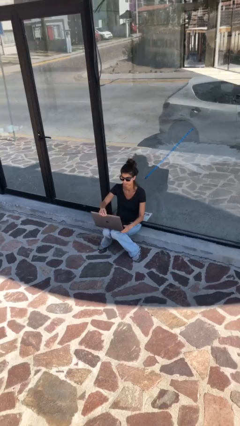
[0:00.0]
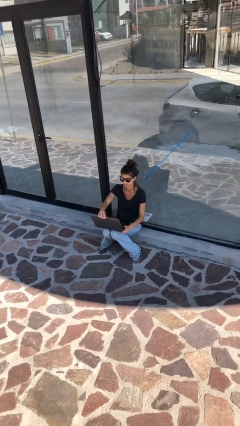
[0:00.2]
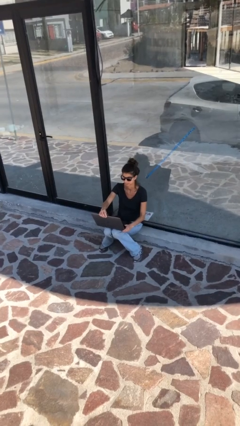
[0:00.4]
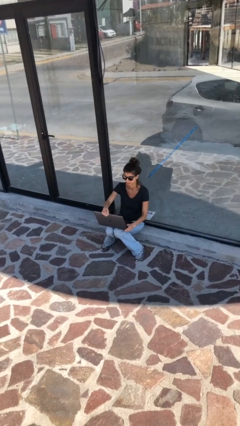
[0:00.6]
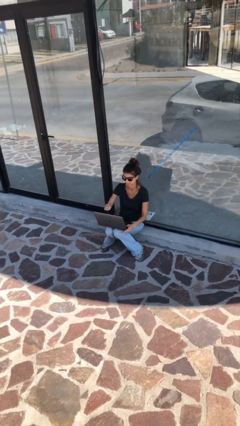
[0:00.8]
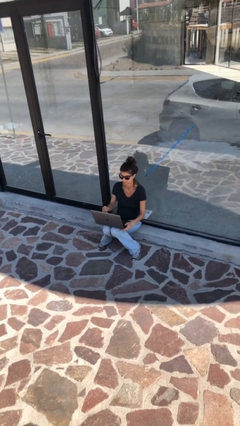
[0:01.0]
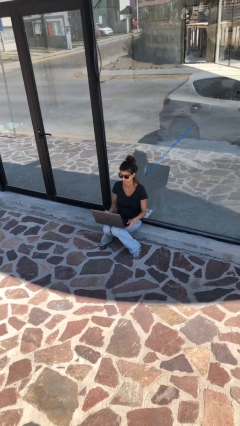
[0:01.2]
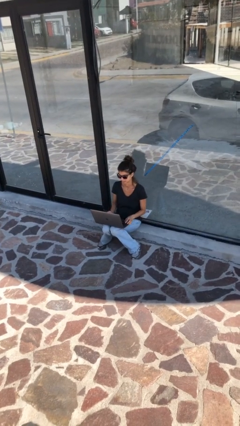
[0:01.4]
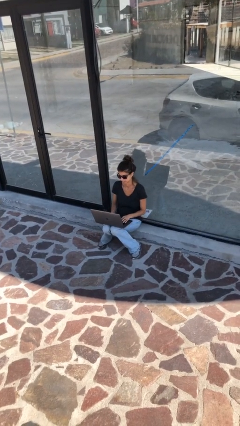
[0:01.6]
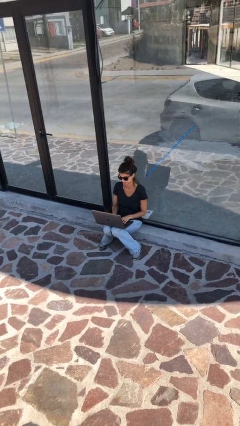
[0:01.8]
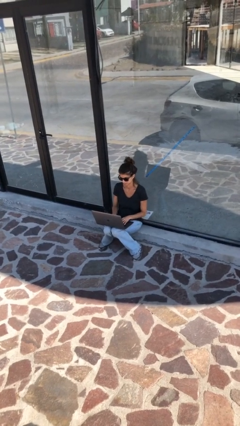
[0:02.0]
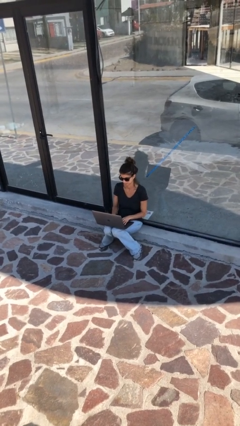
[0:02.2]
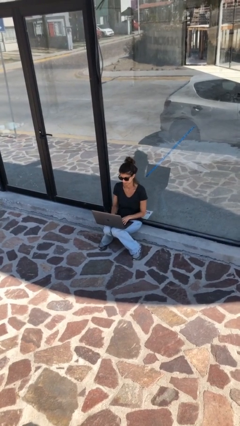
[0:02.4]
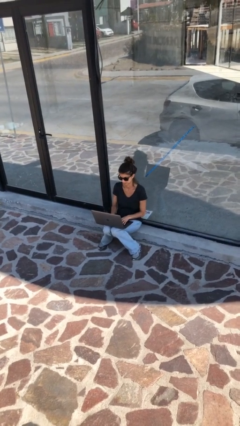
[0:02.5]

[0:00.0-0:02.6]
person interacts with laptop

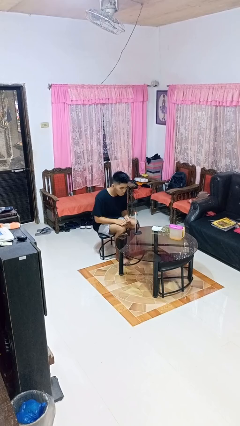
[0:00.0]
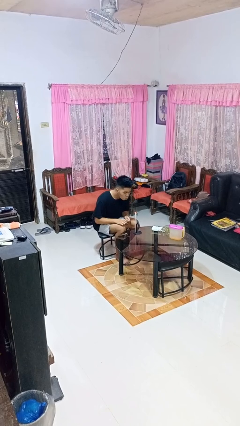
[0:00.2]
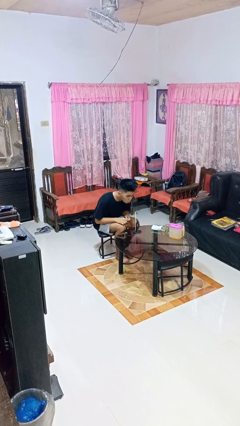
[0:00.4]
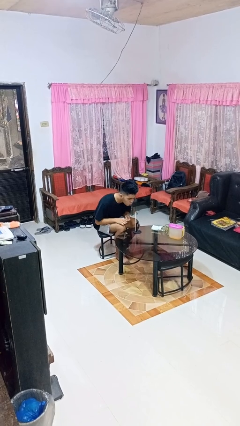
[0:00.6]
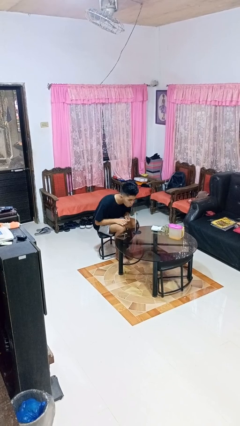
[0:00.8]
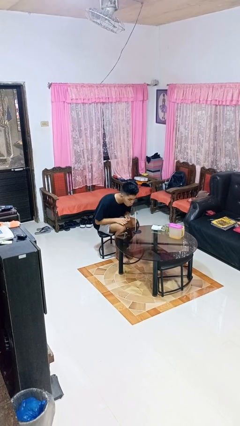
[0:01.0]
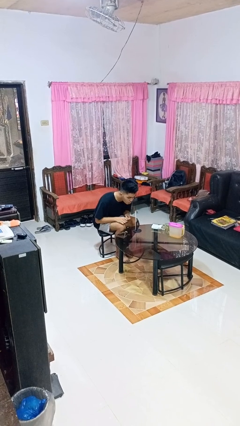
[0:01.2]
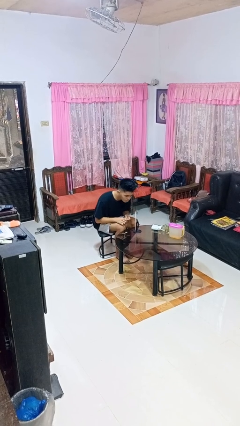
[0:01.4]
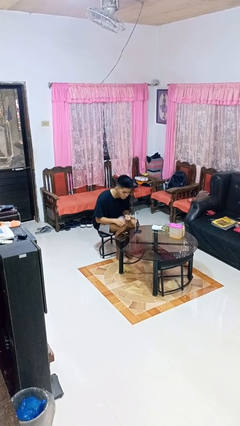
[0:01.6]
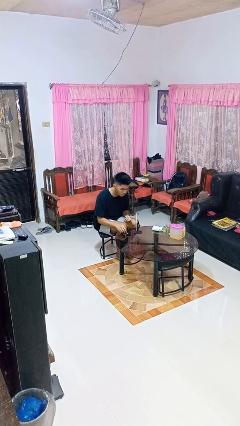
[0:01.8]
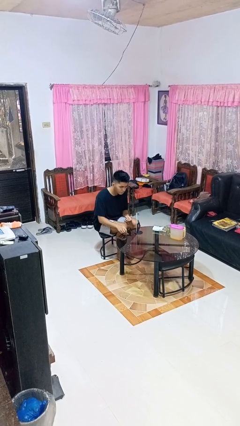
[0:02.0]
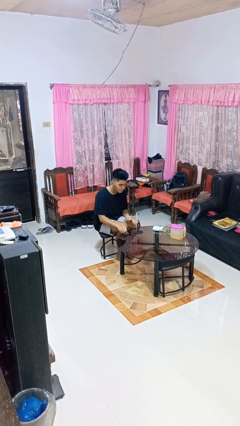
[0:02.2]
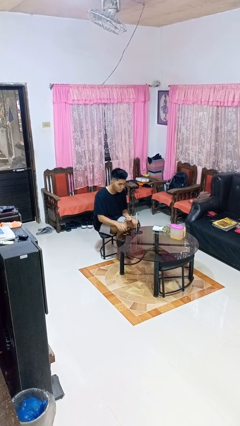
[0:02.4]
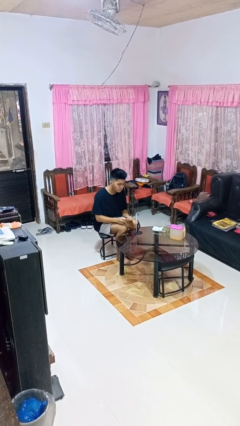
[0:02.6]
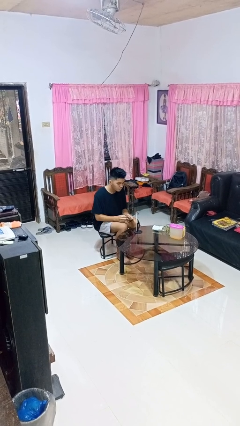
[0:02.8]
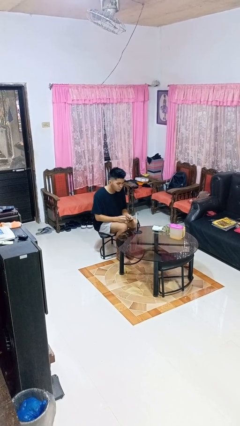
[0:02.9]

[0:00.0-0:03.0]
person extinguishes candle

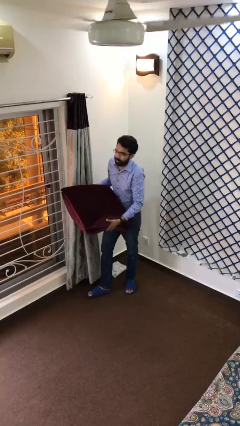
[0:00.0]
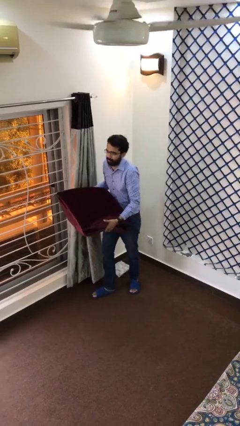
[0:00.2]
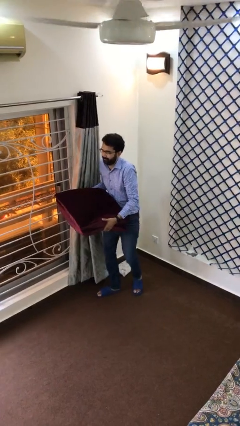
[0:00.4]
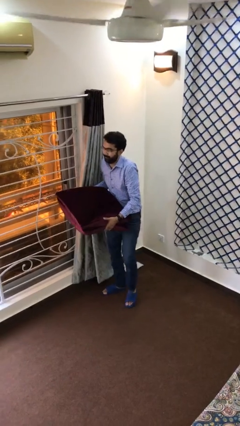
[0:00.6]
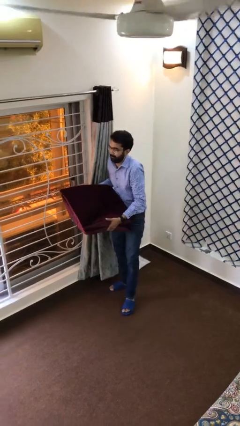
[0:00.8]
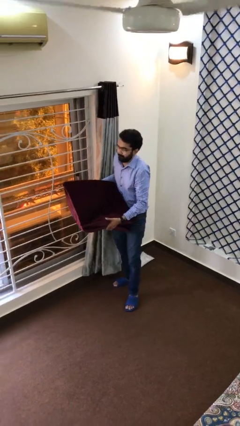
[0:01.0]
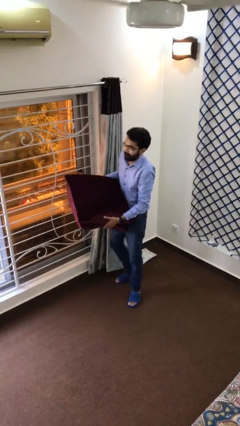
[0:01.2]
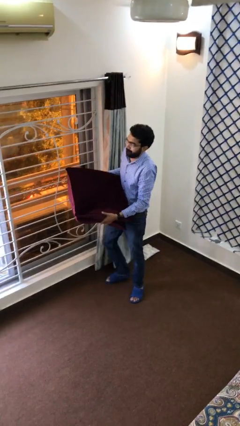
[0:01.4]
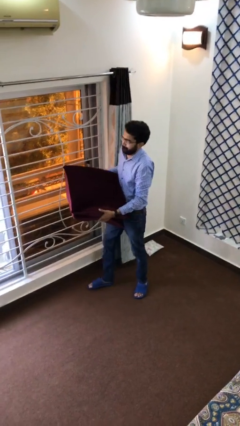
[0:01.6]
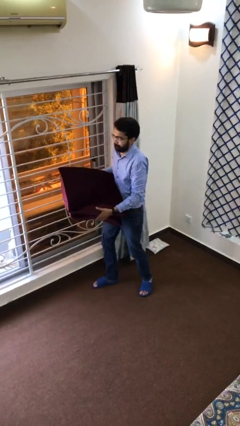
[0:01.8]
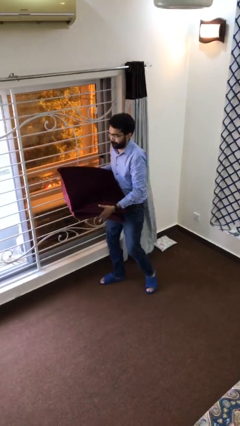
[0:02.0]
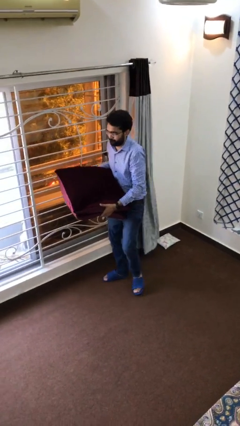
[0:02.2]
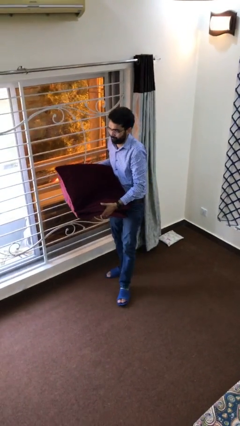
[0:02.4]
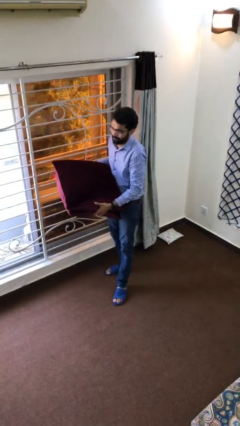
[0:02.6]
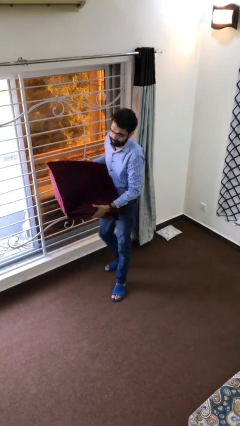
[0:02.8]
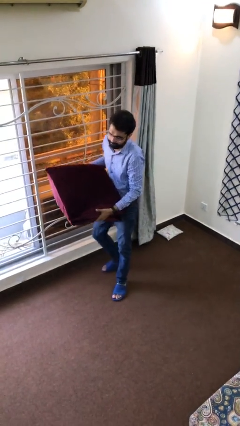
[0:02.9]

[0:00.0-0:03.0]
person carries heavy object

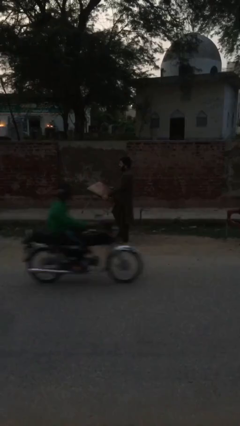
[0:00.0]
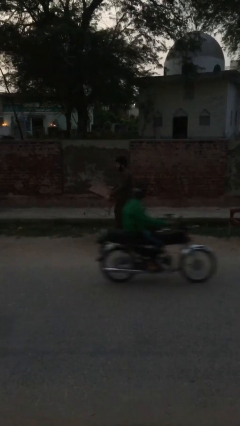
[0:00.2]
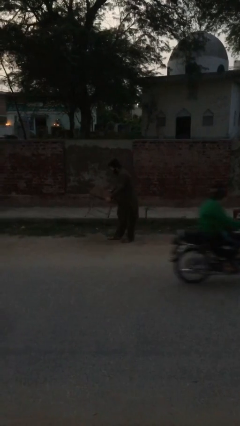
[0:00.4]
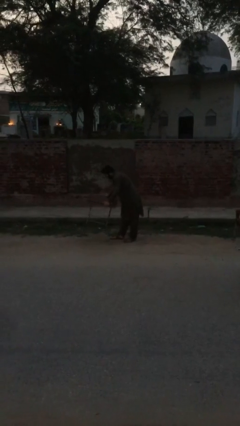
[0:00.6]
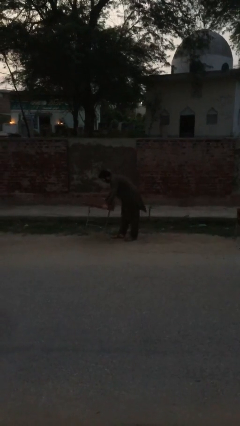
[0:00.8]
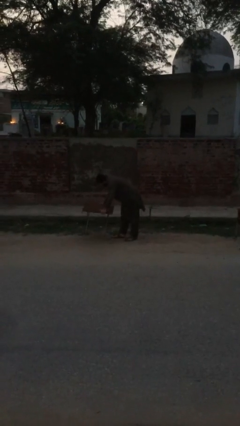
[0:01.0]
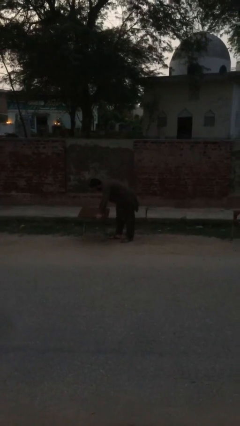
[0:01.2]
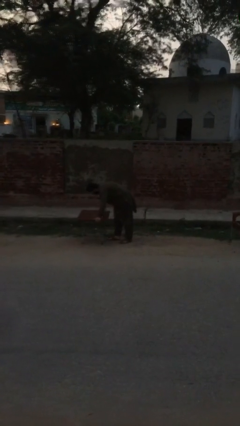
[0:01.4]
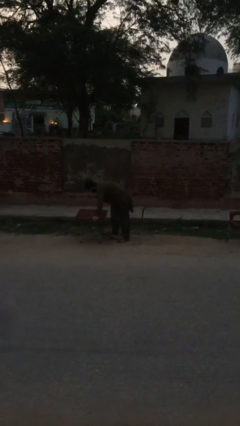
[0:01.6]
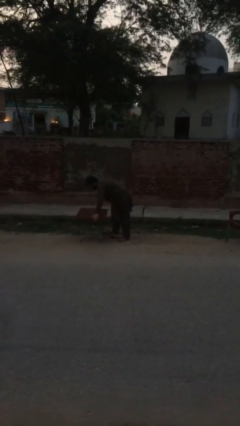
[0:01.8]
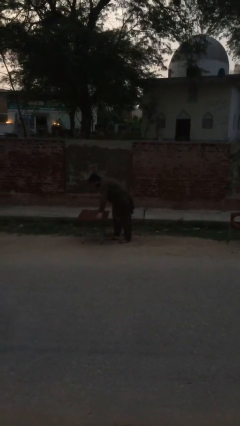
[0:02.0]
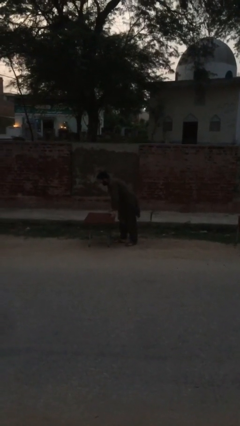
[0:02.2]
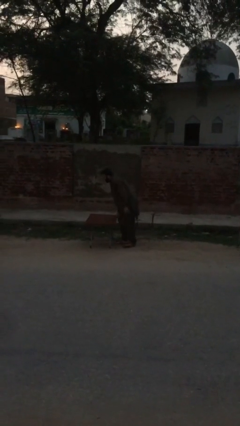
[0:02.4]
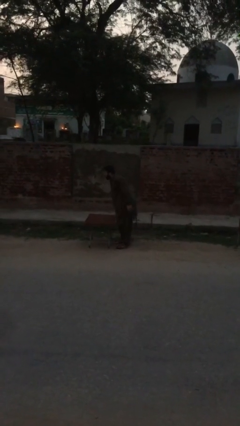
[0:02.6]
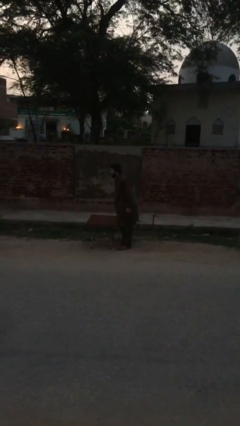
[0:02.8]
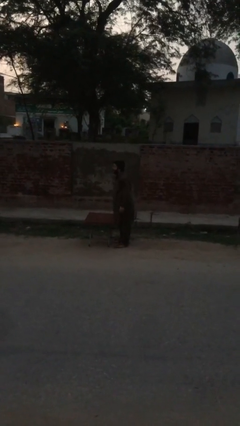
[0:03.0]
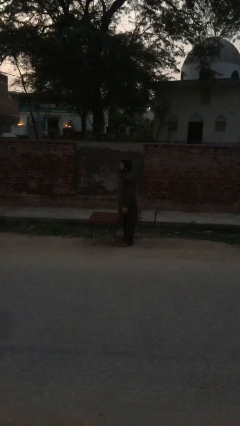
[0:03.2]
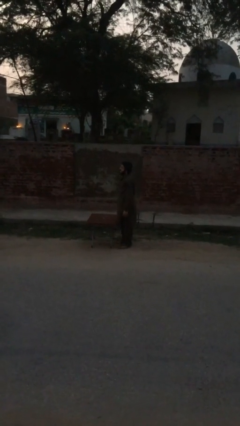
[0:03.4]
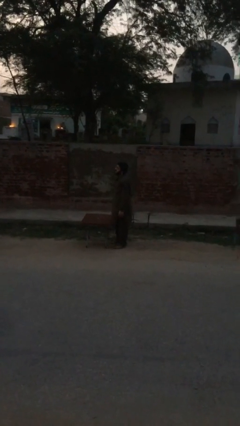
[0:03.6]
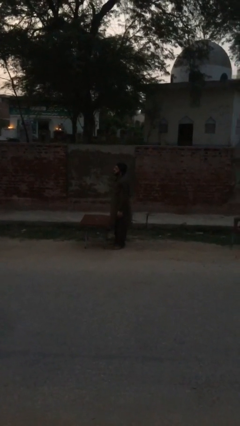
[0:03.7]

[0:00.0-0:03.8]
person puts down object on floor

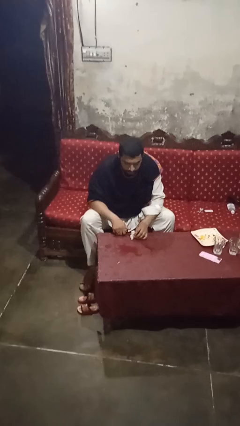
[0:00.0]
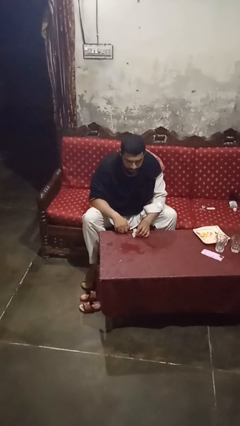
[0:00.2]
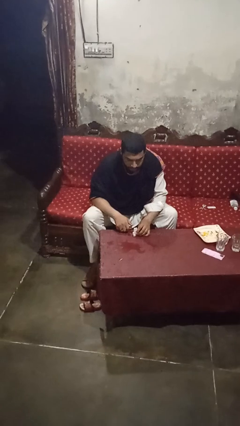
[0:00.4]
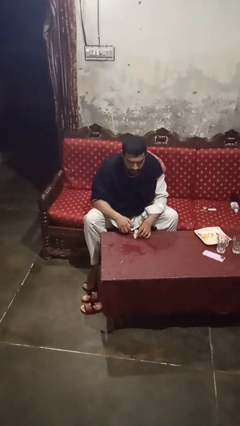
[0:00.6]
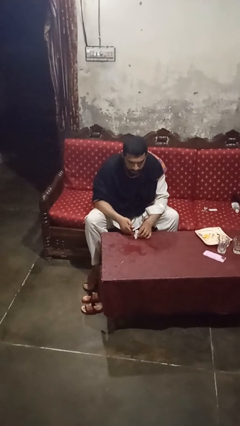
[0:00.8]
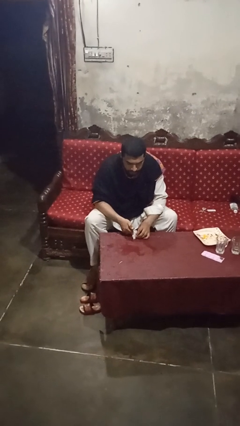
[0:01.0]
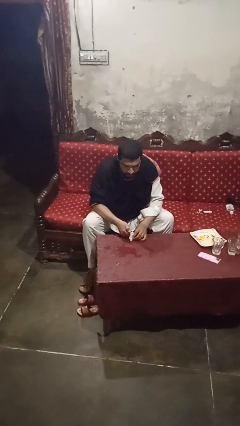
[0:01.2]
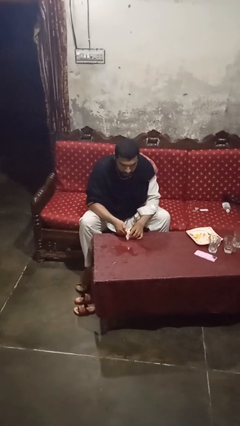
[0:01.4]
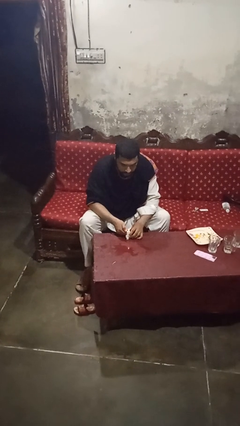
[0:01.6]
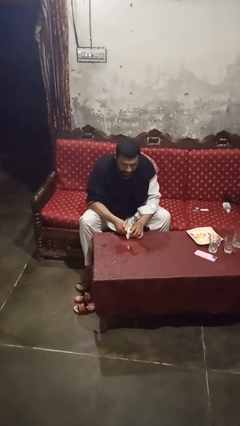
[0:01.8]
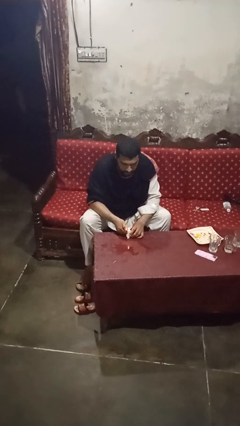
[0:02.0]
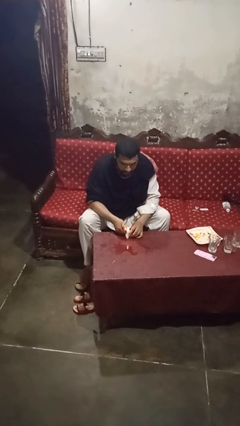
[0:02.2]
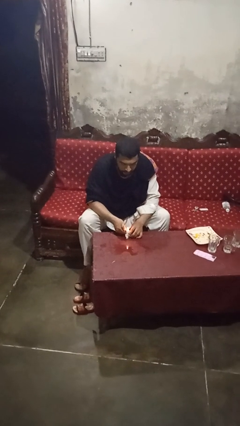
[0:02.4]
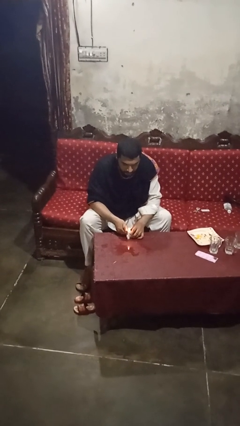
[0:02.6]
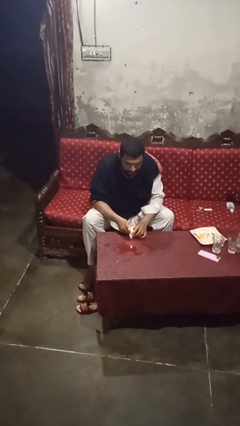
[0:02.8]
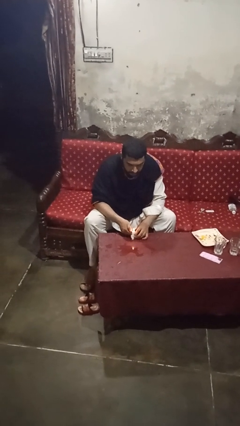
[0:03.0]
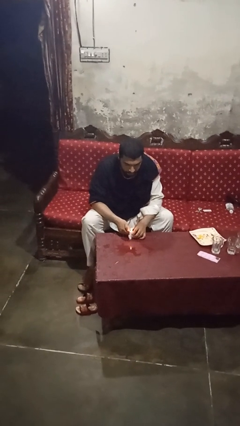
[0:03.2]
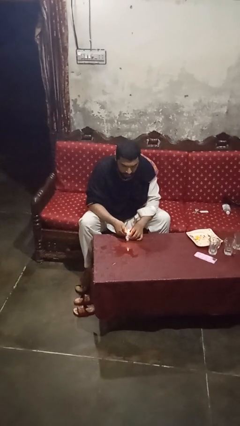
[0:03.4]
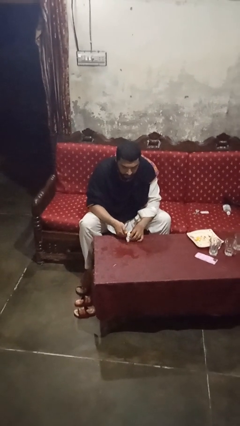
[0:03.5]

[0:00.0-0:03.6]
person lights candle

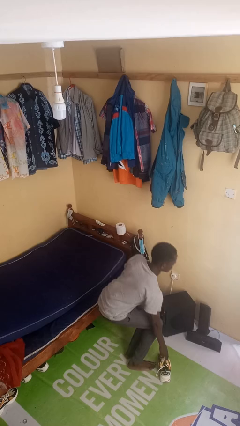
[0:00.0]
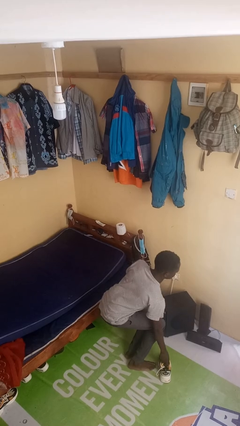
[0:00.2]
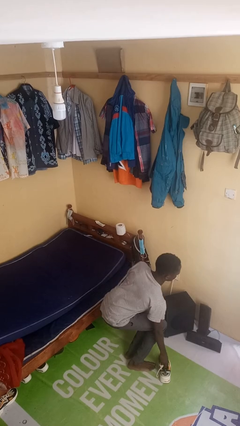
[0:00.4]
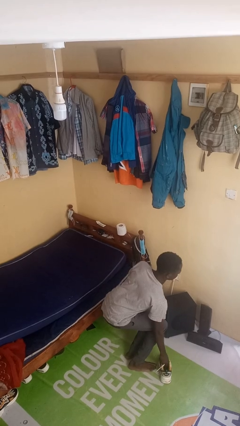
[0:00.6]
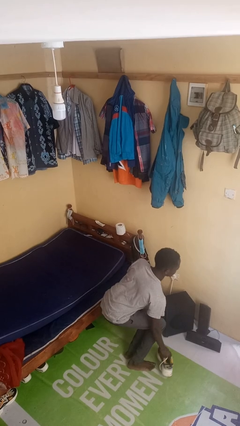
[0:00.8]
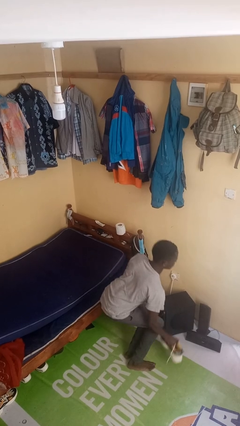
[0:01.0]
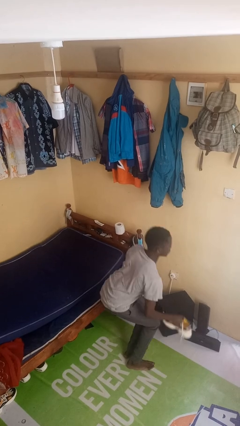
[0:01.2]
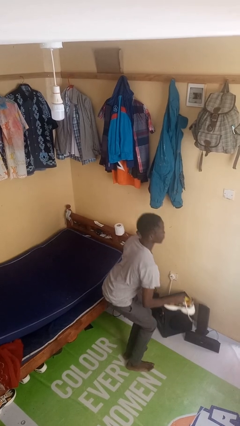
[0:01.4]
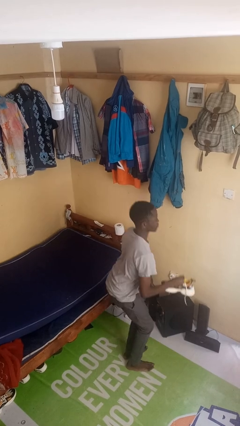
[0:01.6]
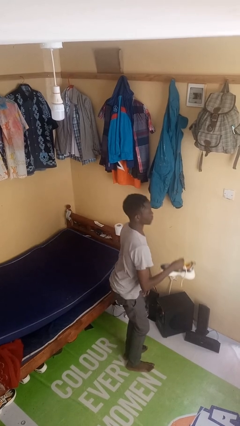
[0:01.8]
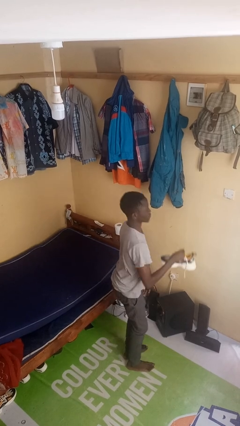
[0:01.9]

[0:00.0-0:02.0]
person picks up object from floor
